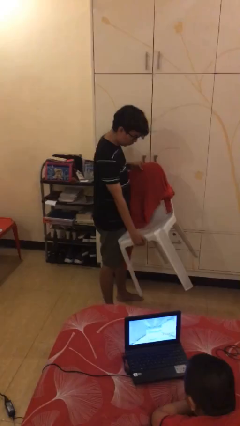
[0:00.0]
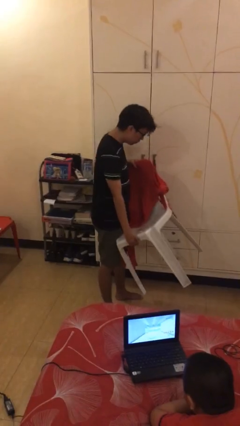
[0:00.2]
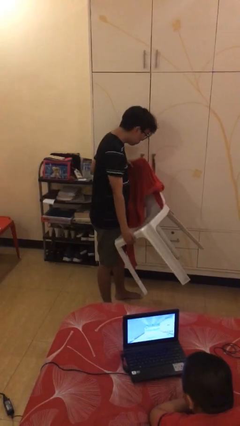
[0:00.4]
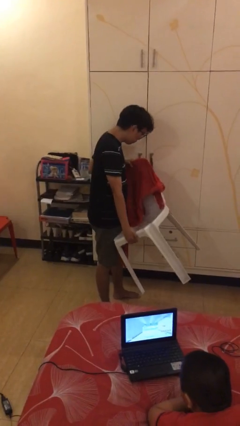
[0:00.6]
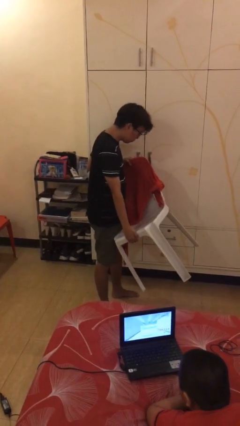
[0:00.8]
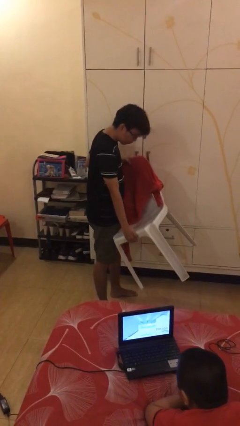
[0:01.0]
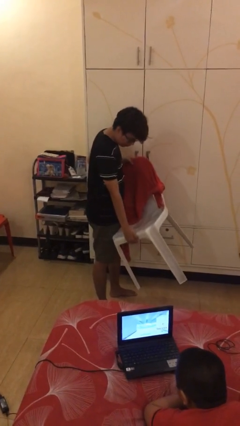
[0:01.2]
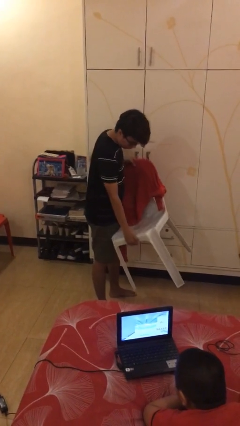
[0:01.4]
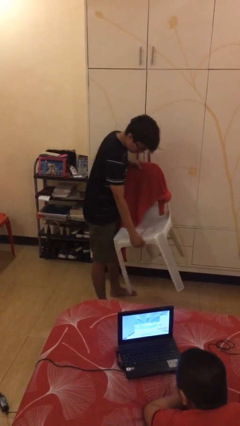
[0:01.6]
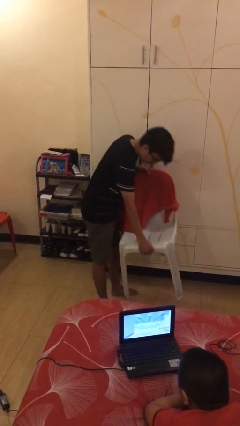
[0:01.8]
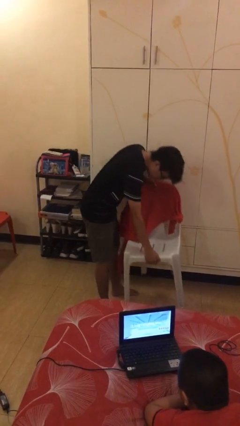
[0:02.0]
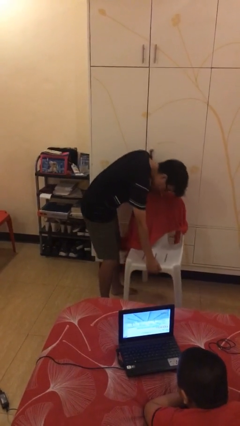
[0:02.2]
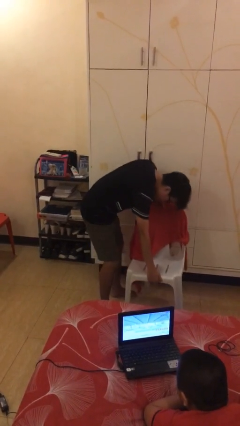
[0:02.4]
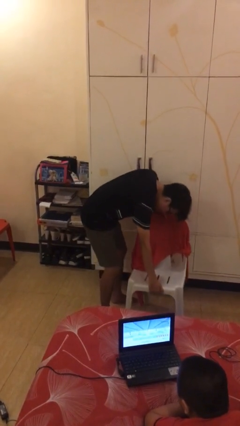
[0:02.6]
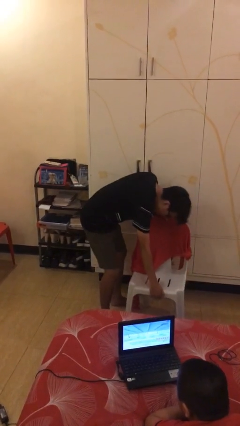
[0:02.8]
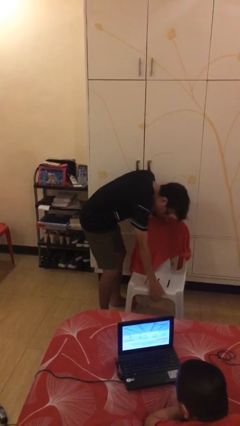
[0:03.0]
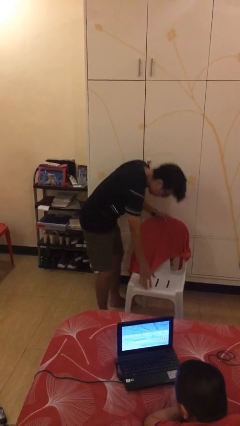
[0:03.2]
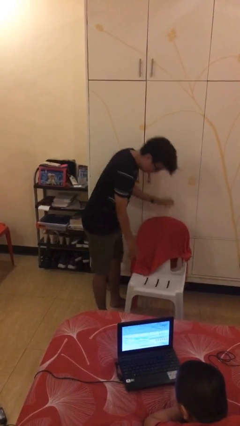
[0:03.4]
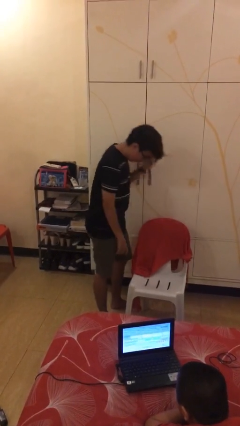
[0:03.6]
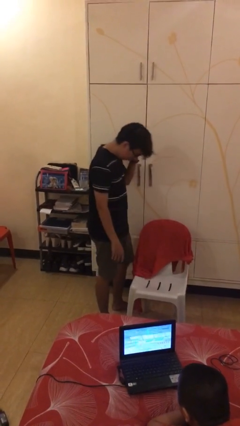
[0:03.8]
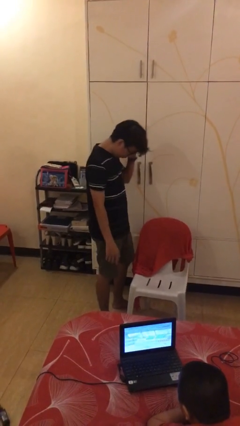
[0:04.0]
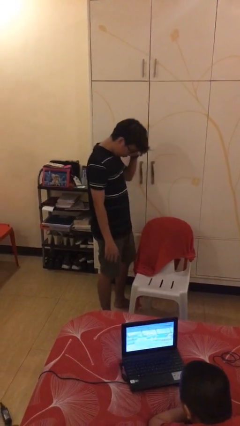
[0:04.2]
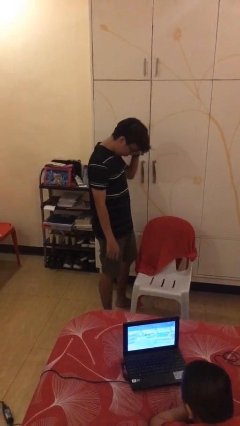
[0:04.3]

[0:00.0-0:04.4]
person puts down object on floor

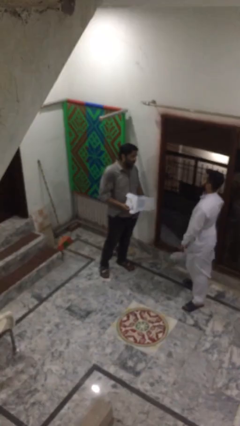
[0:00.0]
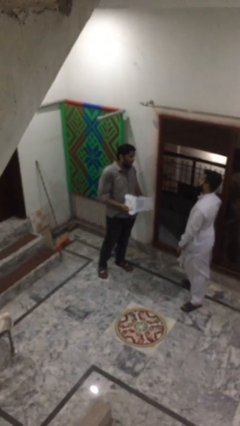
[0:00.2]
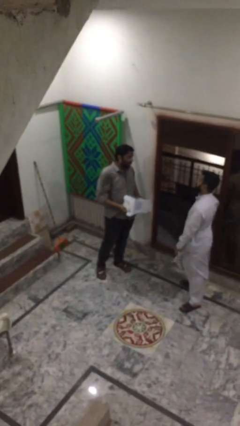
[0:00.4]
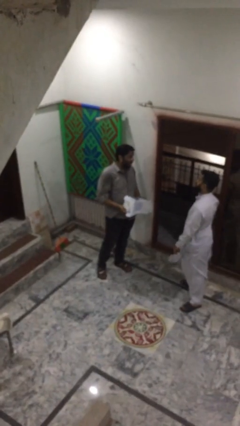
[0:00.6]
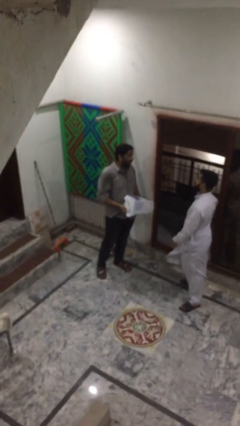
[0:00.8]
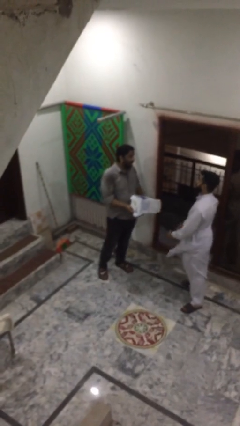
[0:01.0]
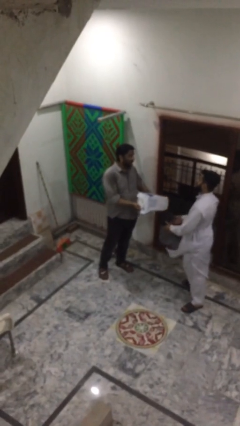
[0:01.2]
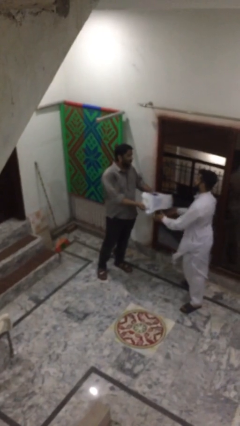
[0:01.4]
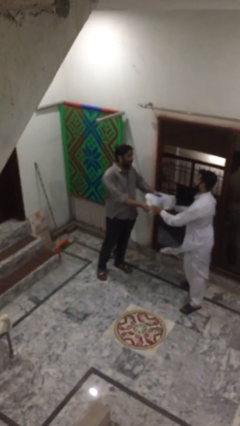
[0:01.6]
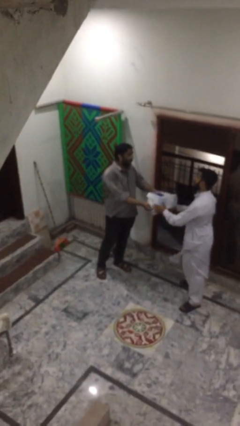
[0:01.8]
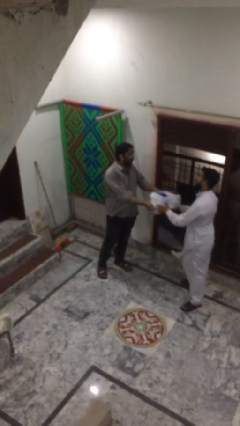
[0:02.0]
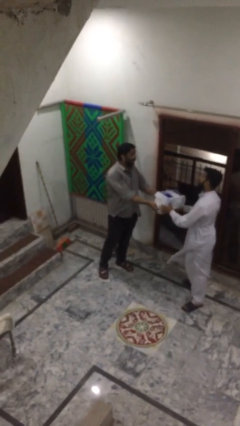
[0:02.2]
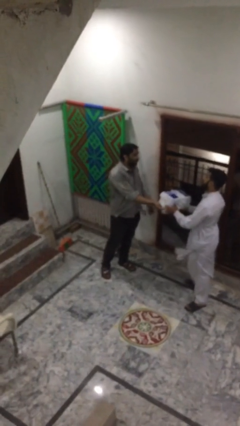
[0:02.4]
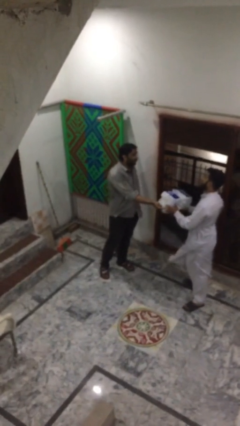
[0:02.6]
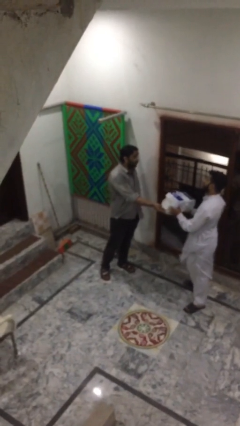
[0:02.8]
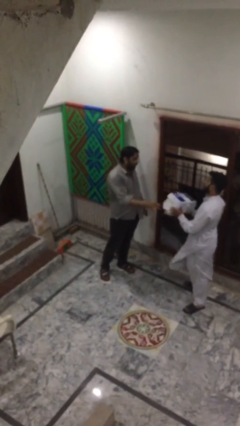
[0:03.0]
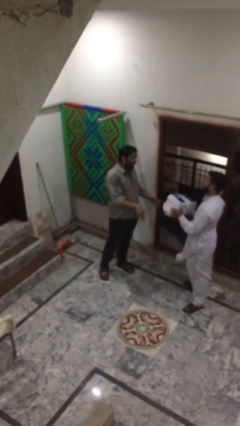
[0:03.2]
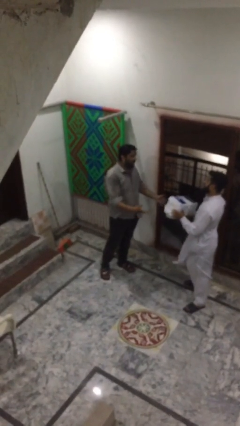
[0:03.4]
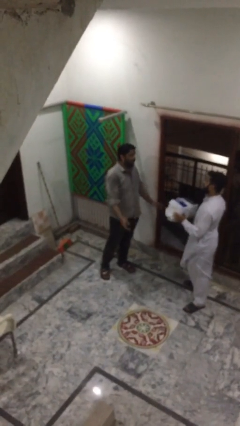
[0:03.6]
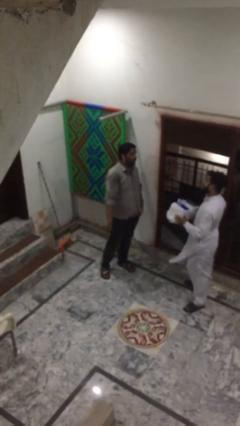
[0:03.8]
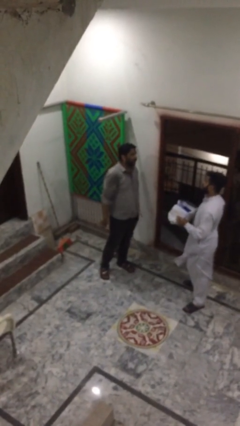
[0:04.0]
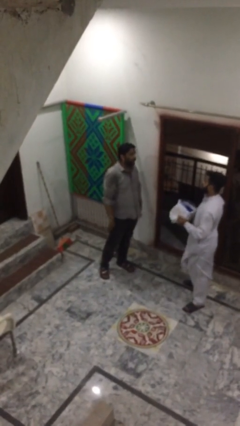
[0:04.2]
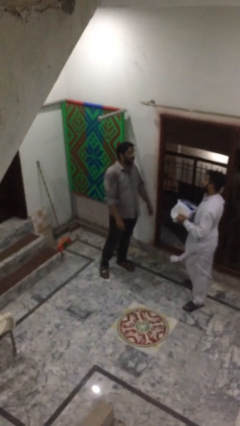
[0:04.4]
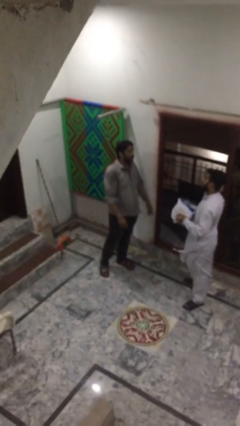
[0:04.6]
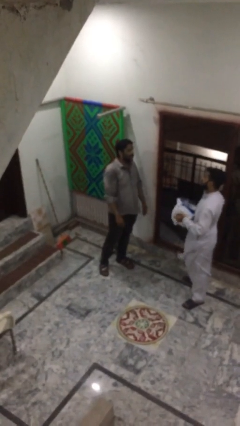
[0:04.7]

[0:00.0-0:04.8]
person transfers object to person

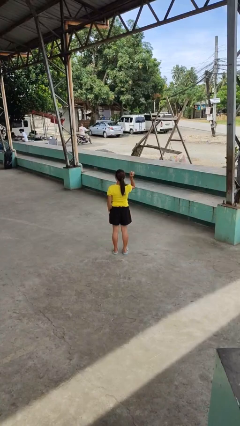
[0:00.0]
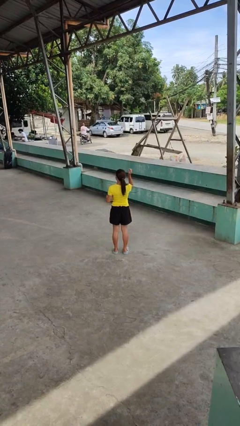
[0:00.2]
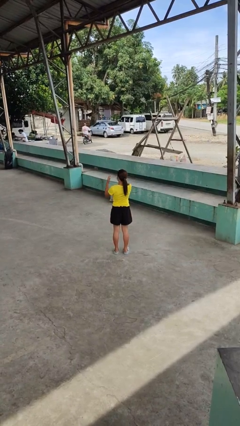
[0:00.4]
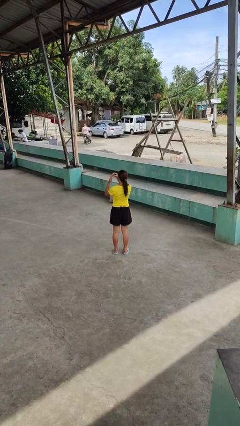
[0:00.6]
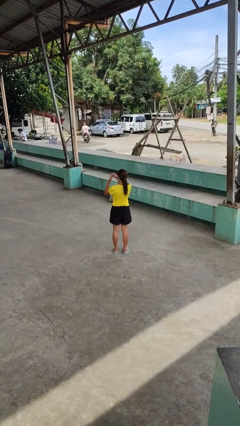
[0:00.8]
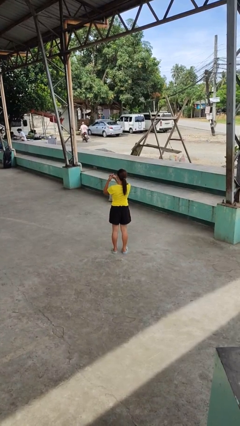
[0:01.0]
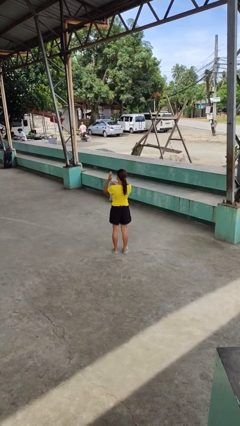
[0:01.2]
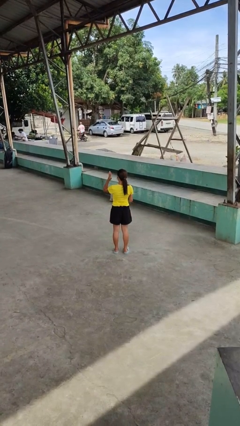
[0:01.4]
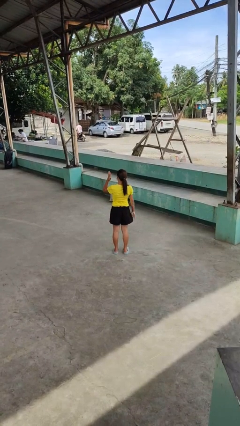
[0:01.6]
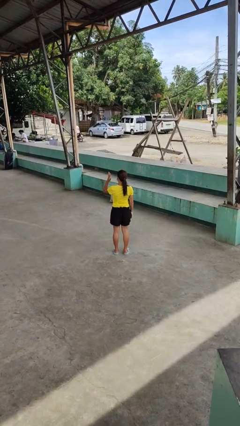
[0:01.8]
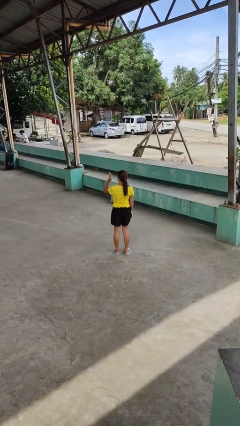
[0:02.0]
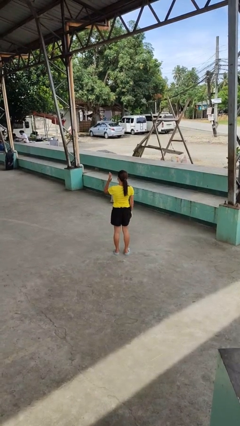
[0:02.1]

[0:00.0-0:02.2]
person puts on ring

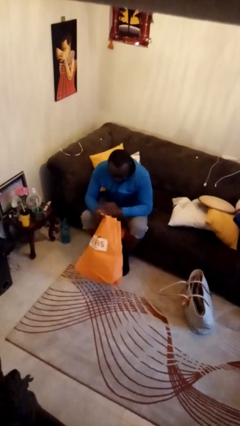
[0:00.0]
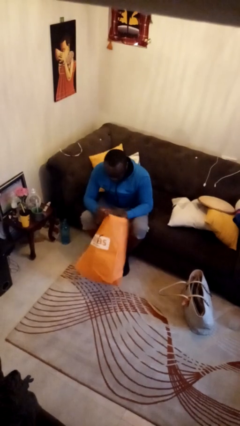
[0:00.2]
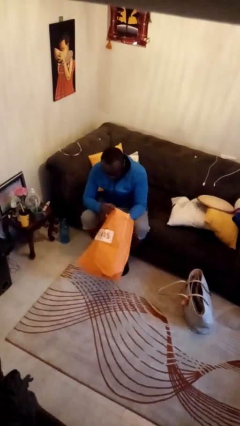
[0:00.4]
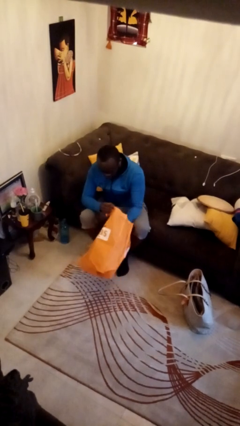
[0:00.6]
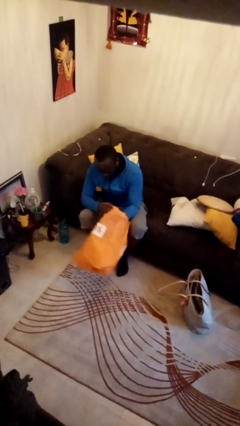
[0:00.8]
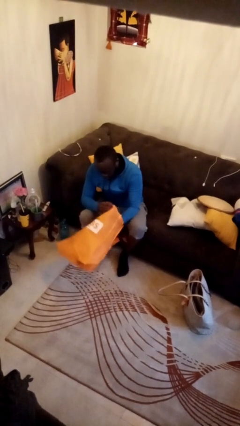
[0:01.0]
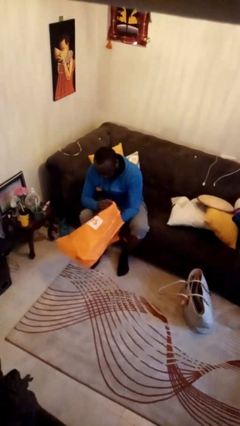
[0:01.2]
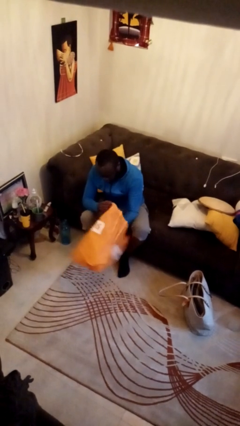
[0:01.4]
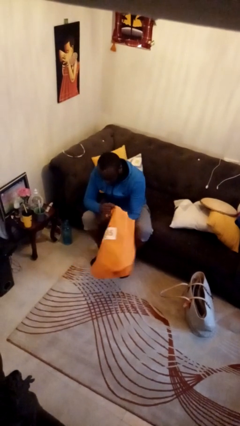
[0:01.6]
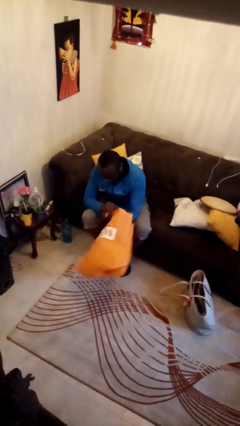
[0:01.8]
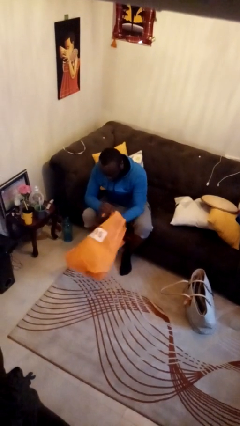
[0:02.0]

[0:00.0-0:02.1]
person searches in bag

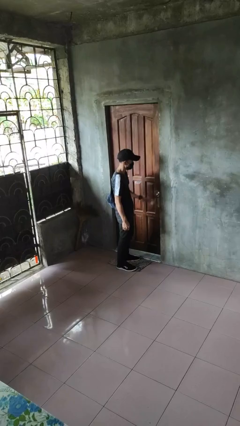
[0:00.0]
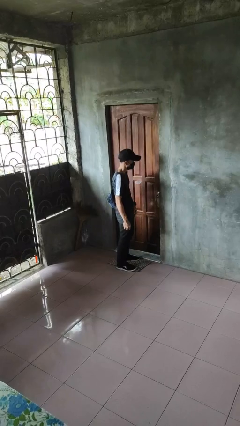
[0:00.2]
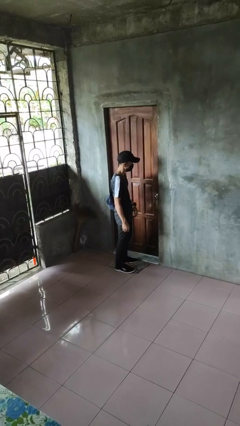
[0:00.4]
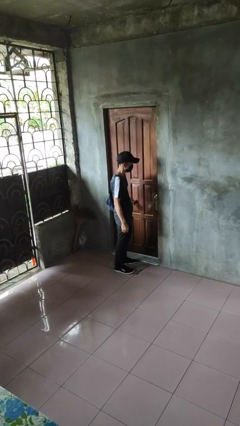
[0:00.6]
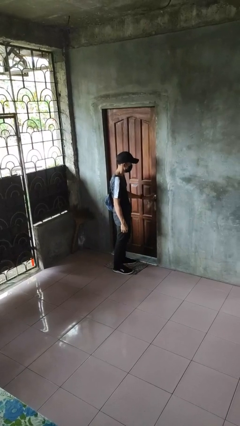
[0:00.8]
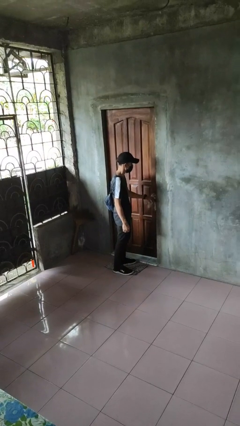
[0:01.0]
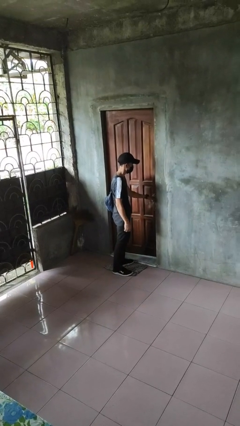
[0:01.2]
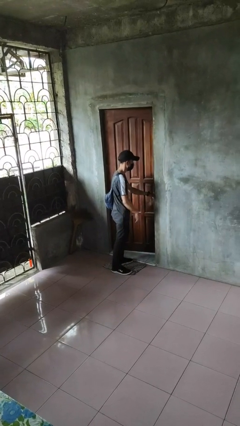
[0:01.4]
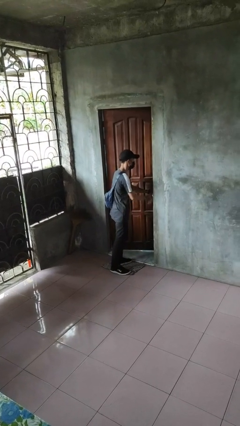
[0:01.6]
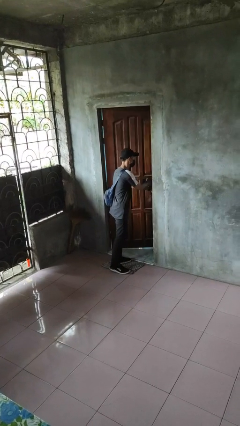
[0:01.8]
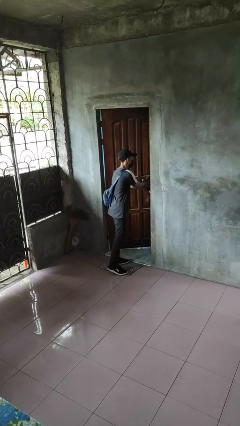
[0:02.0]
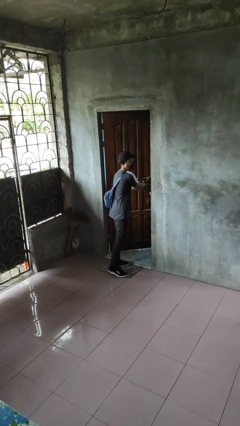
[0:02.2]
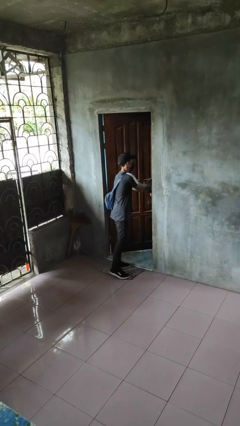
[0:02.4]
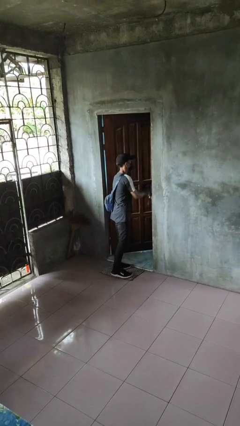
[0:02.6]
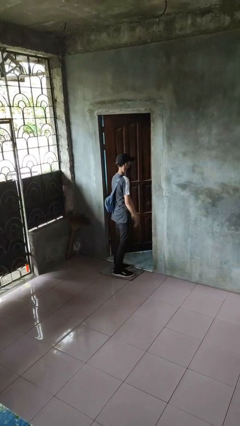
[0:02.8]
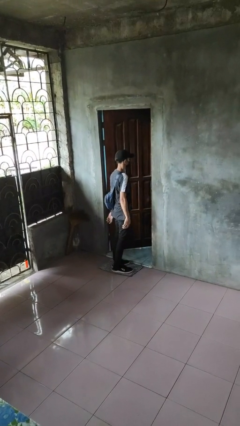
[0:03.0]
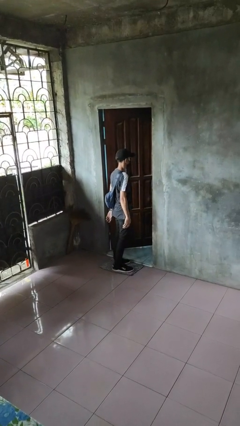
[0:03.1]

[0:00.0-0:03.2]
person opens facility door

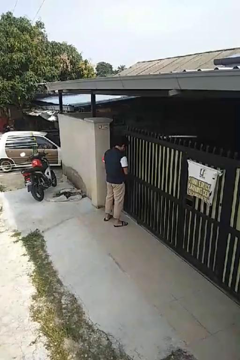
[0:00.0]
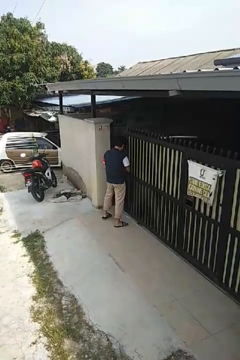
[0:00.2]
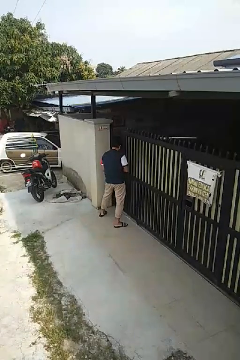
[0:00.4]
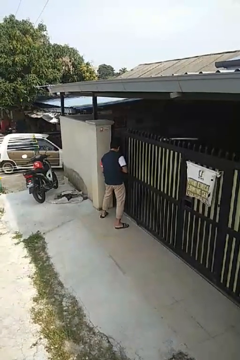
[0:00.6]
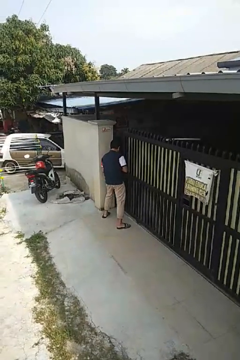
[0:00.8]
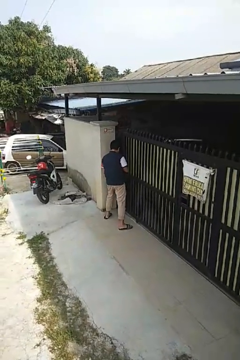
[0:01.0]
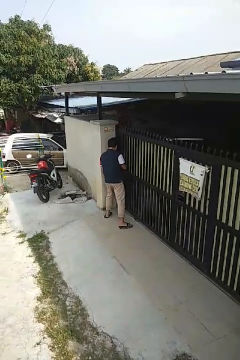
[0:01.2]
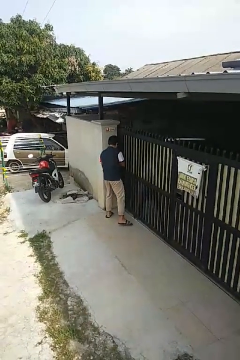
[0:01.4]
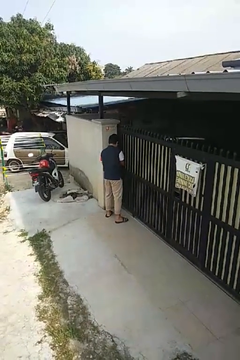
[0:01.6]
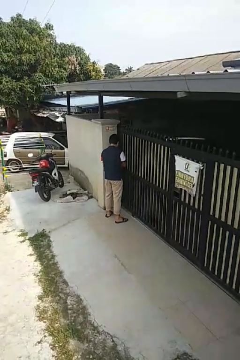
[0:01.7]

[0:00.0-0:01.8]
person closes sliding door
